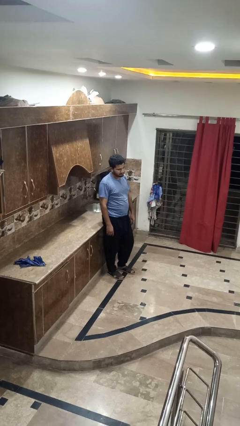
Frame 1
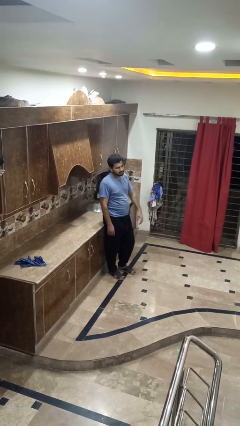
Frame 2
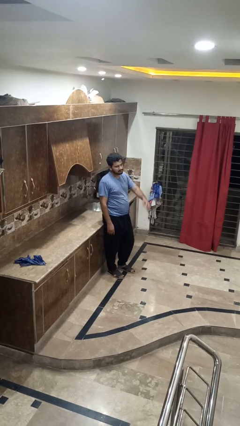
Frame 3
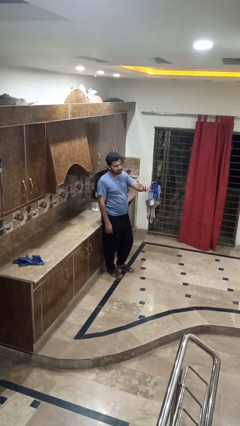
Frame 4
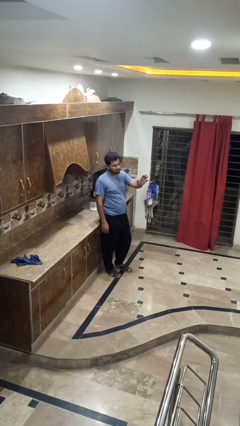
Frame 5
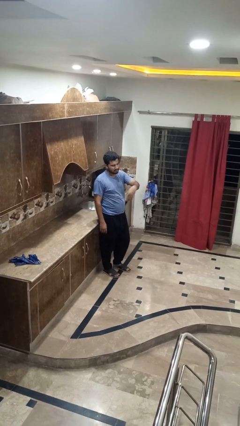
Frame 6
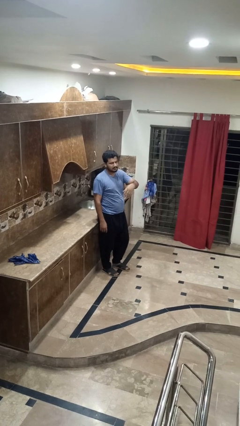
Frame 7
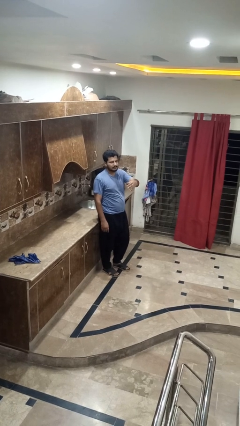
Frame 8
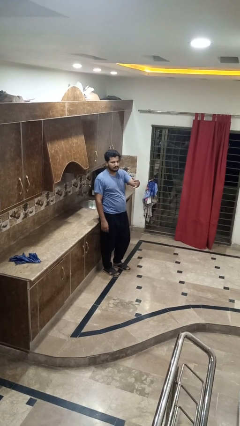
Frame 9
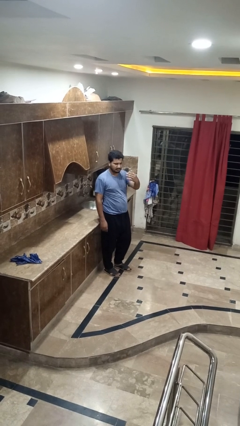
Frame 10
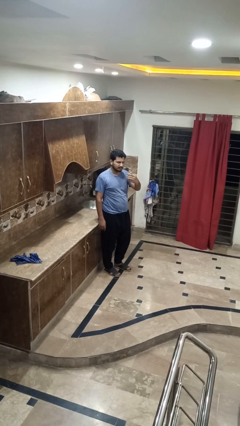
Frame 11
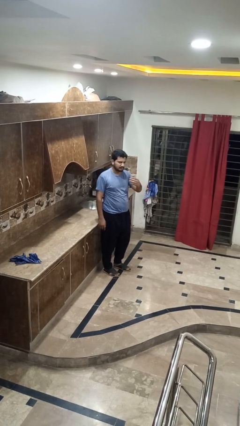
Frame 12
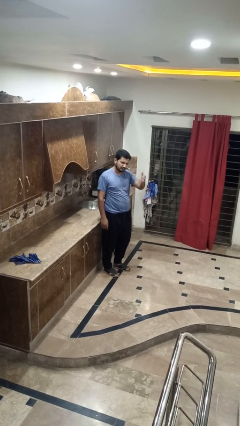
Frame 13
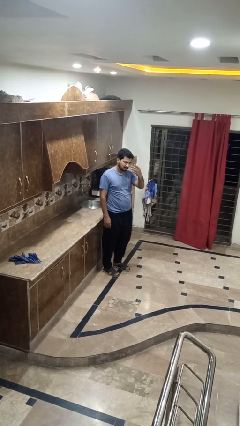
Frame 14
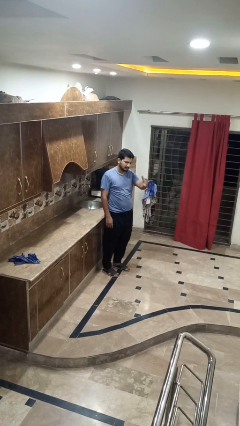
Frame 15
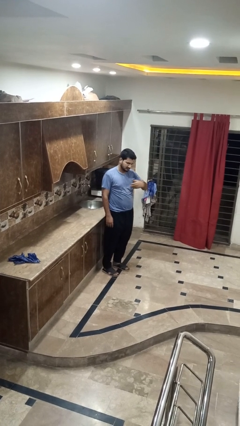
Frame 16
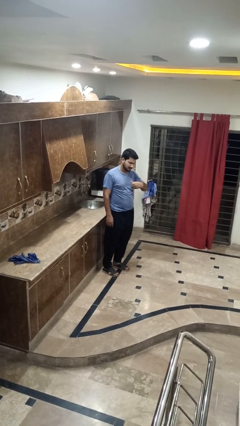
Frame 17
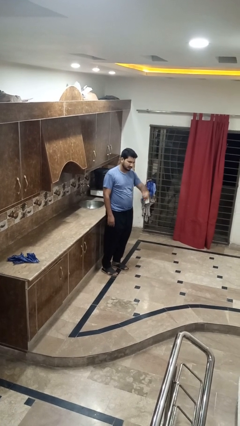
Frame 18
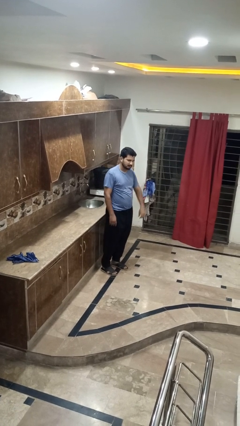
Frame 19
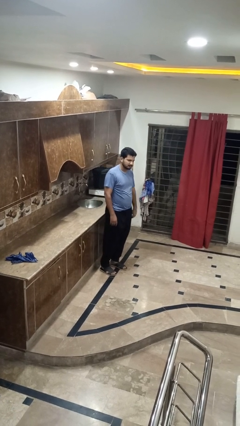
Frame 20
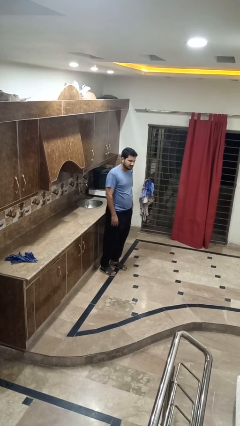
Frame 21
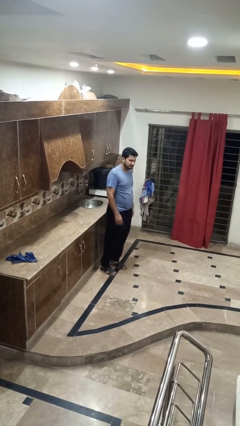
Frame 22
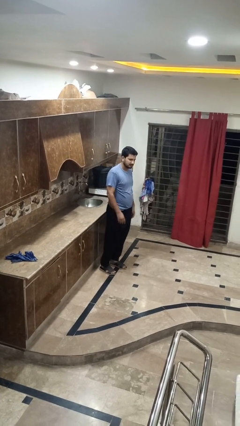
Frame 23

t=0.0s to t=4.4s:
person gestures come here

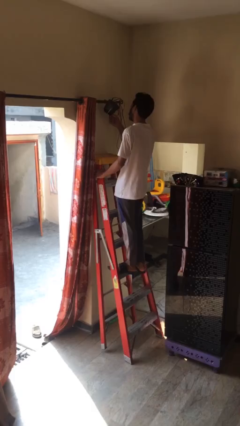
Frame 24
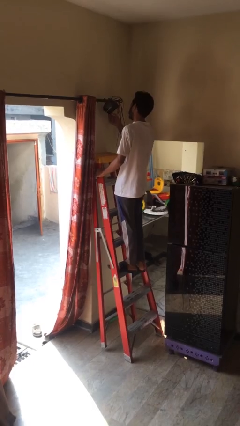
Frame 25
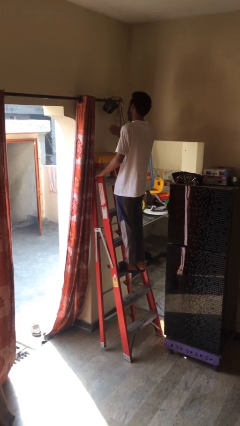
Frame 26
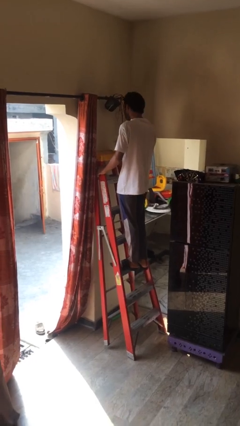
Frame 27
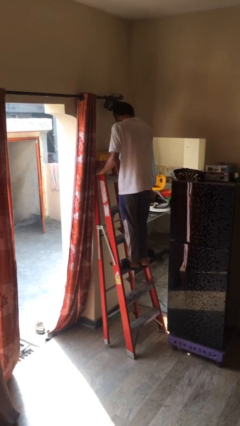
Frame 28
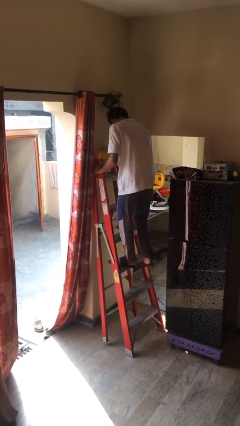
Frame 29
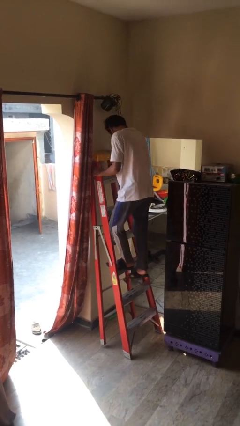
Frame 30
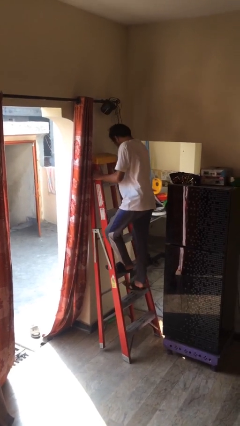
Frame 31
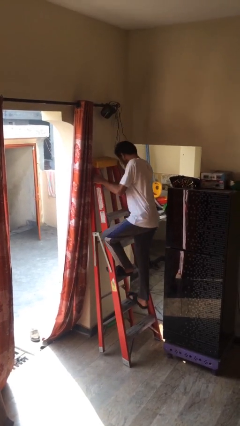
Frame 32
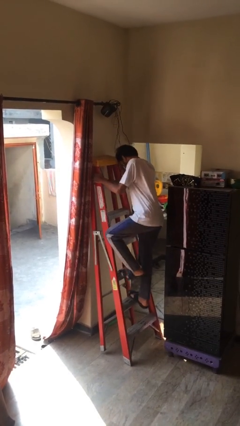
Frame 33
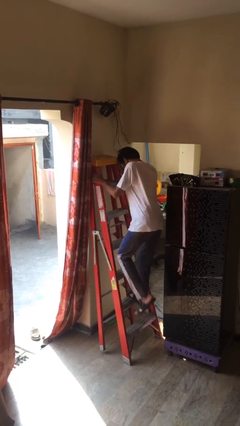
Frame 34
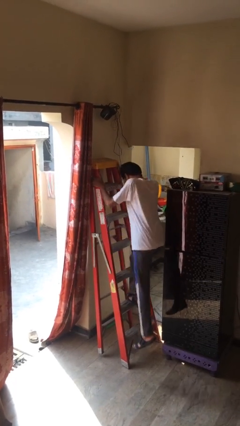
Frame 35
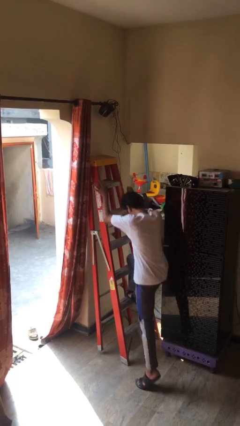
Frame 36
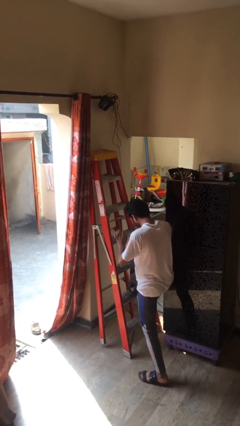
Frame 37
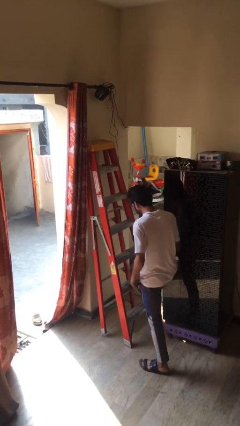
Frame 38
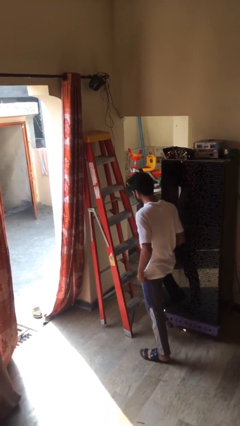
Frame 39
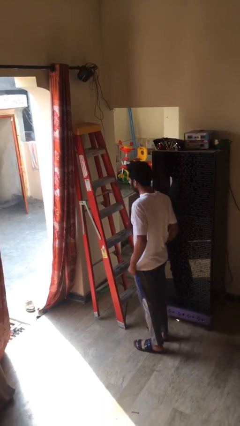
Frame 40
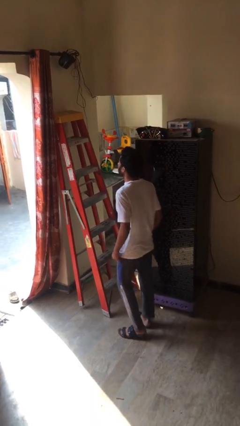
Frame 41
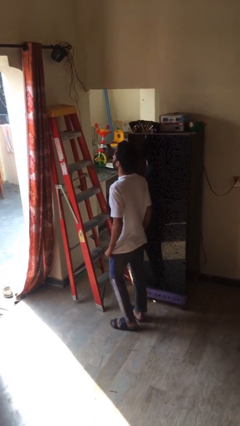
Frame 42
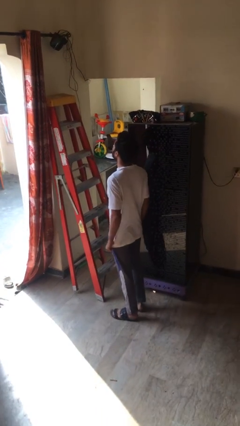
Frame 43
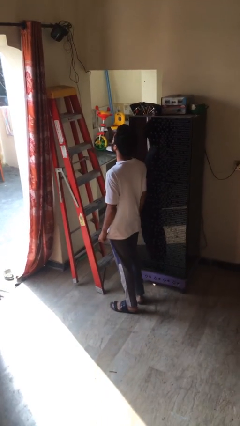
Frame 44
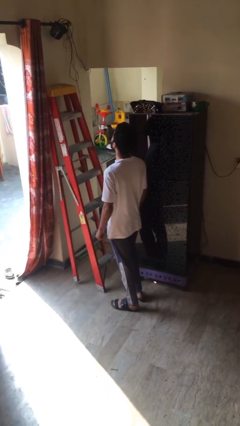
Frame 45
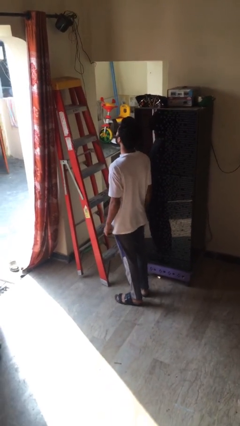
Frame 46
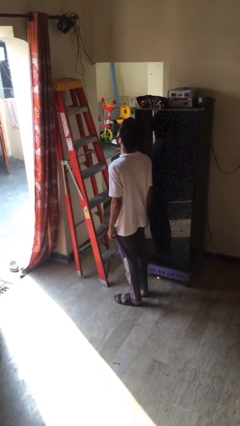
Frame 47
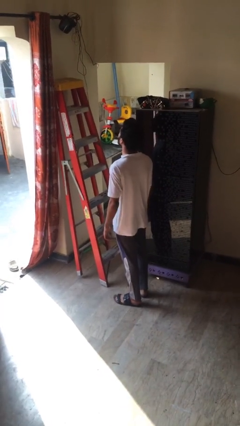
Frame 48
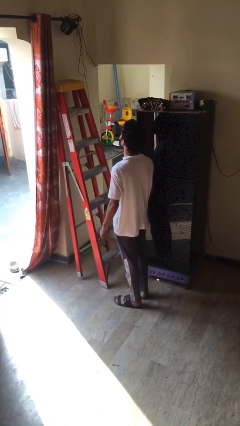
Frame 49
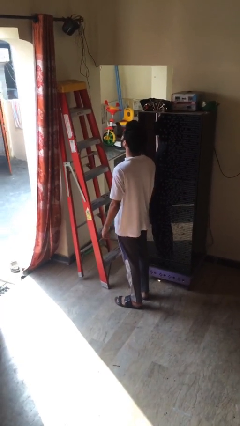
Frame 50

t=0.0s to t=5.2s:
person climbs down ladder

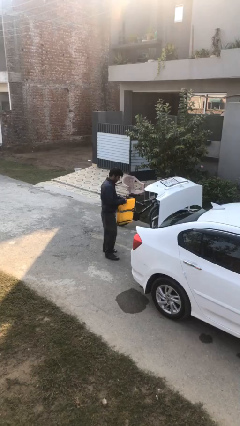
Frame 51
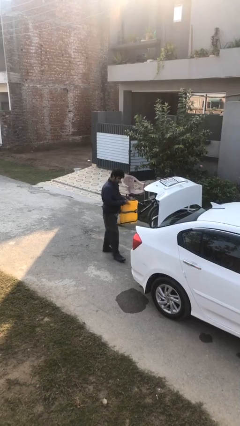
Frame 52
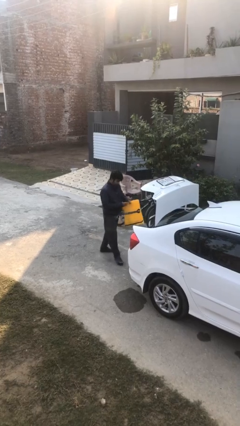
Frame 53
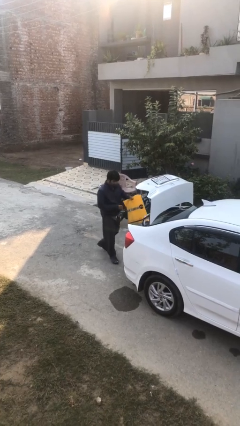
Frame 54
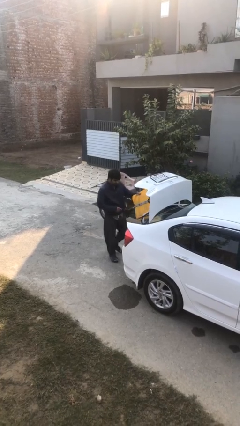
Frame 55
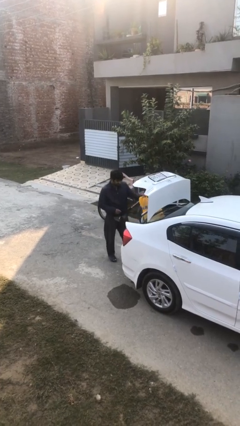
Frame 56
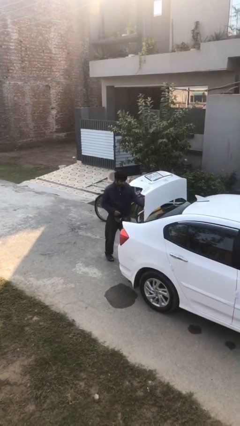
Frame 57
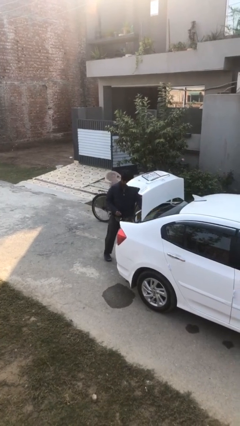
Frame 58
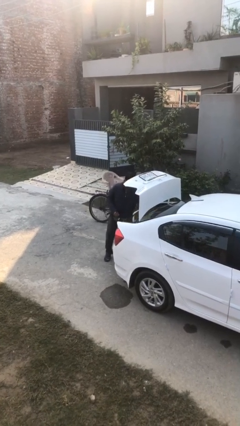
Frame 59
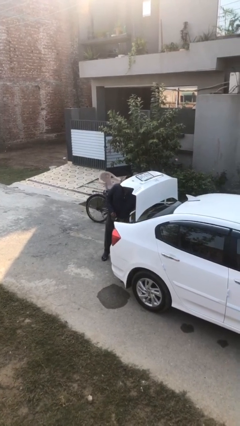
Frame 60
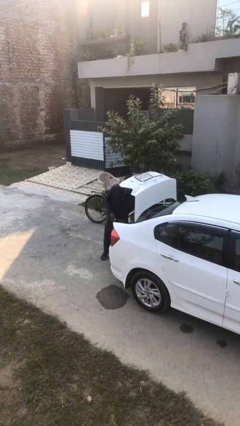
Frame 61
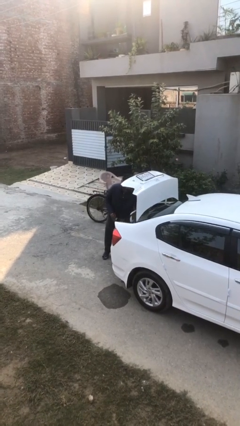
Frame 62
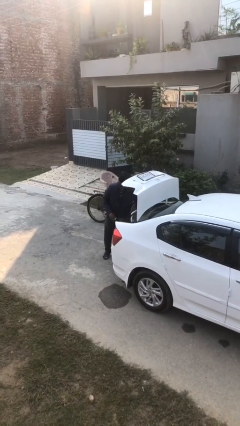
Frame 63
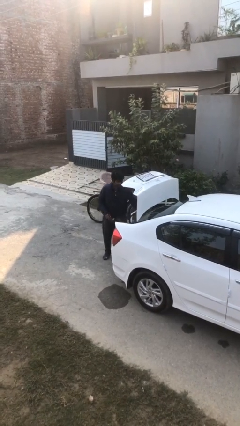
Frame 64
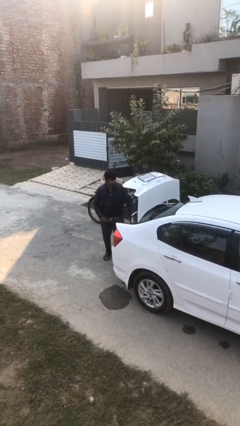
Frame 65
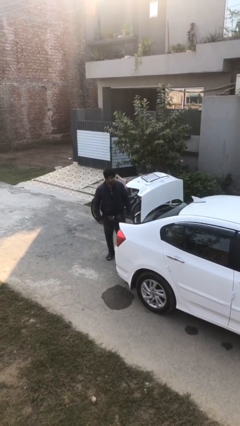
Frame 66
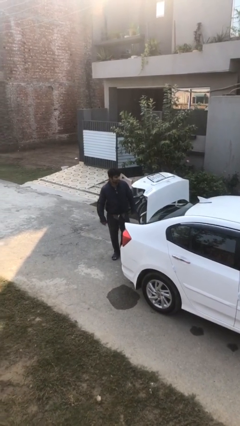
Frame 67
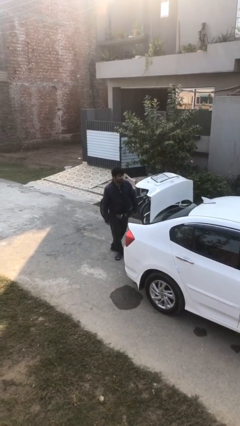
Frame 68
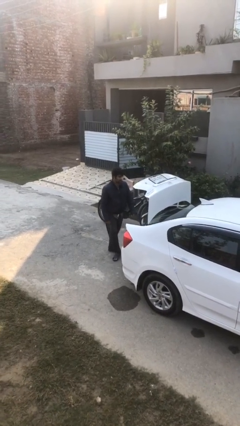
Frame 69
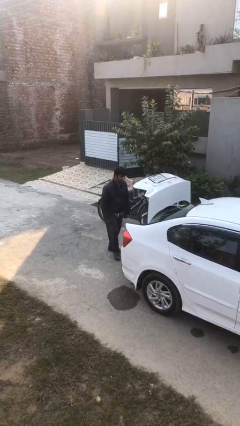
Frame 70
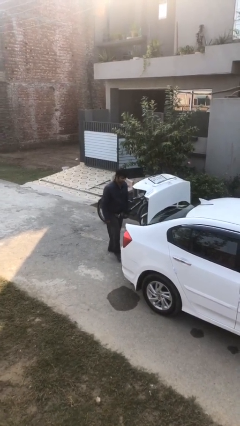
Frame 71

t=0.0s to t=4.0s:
person loads car

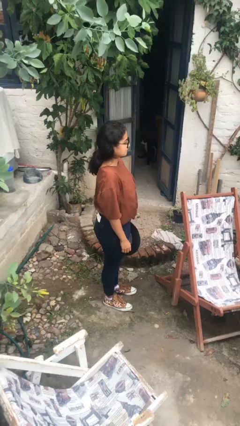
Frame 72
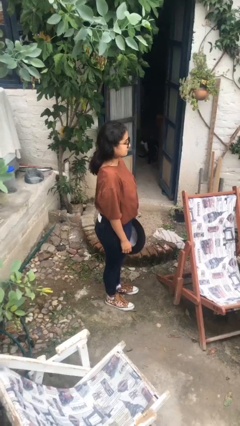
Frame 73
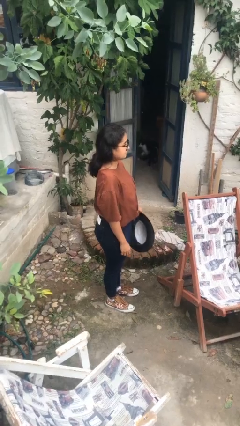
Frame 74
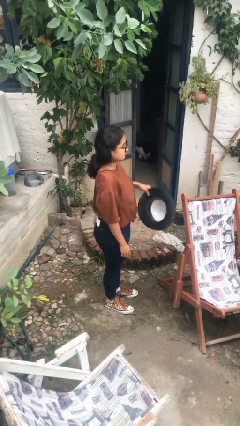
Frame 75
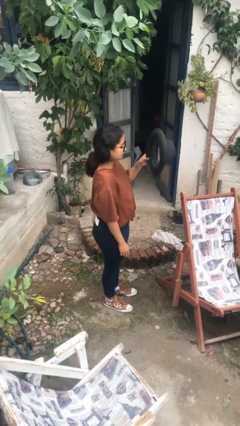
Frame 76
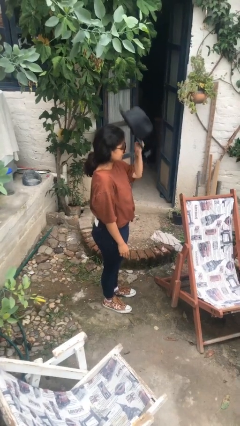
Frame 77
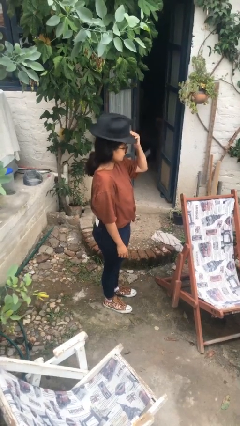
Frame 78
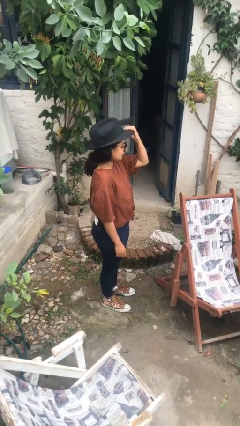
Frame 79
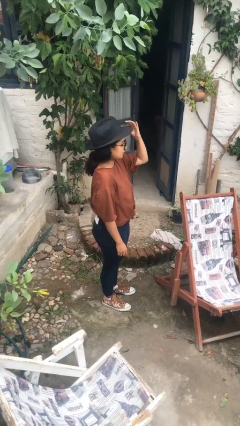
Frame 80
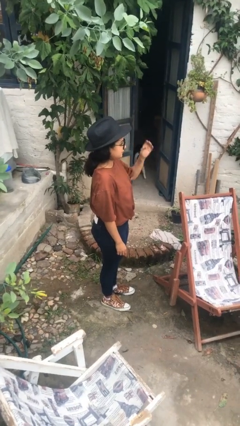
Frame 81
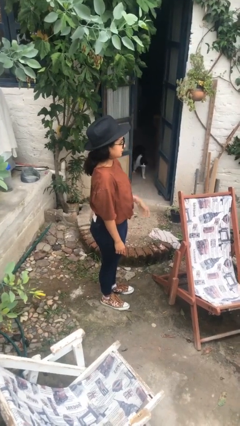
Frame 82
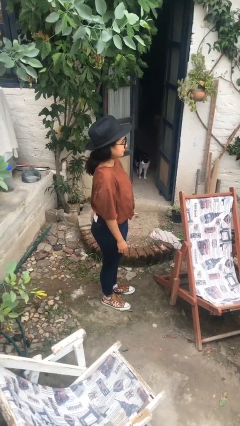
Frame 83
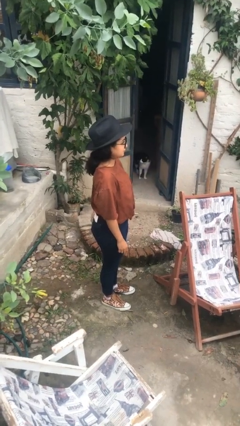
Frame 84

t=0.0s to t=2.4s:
person puts on hat

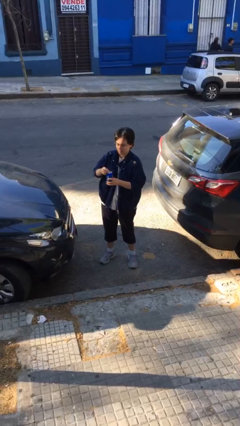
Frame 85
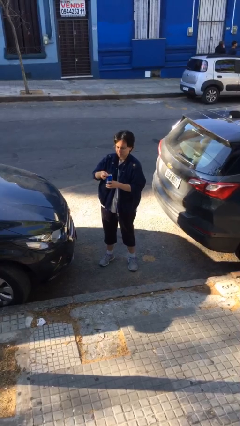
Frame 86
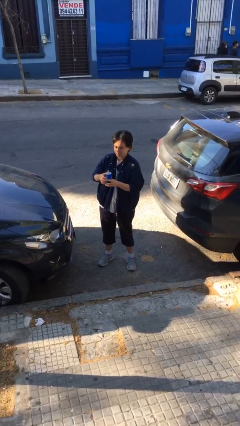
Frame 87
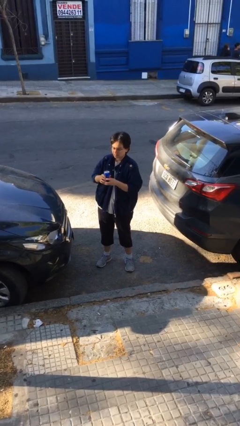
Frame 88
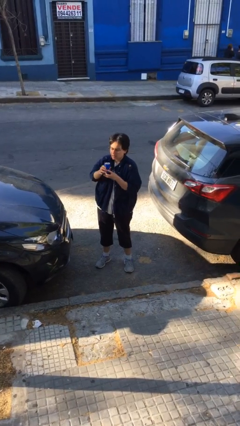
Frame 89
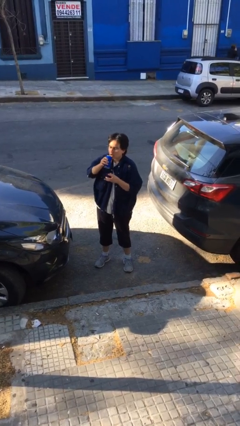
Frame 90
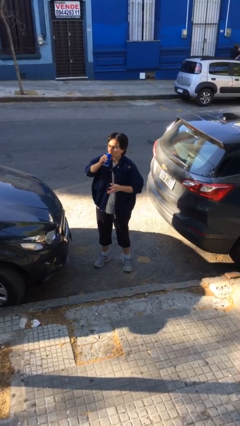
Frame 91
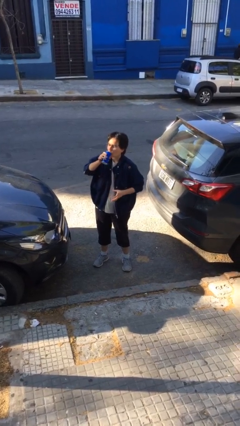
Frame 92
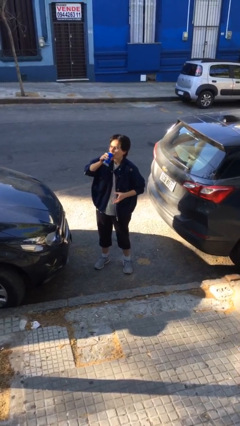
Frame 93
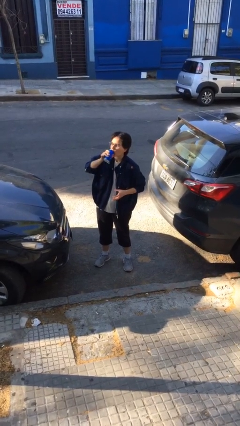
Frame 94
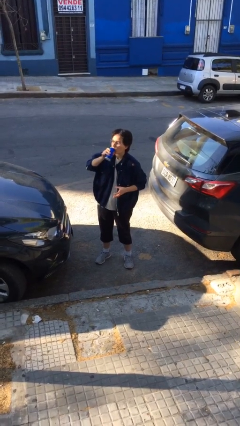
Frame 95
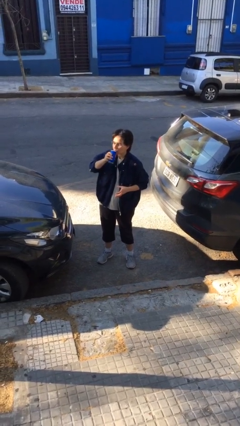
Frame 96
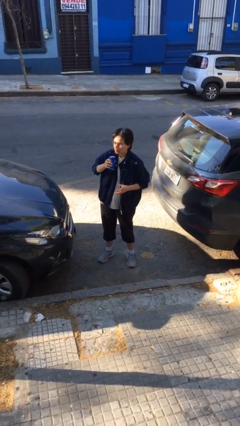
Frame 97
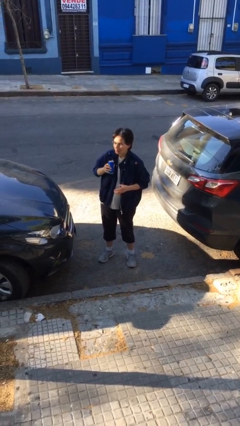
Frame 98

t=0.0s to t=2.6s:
person drinks from beverage can
